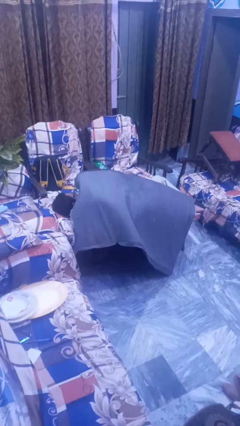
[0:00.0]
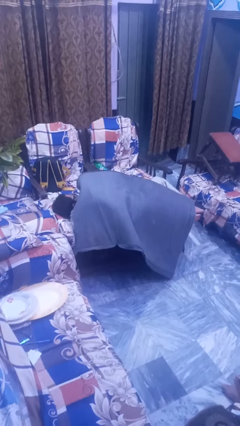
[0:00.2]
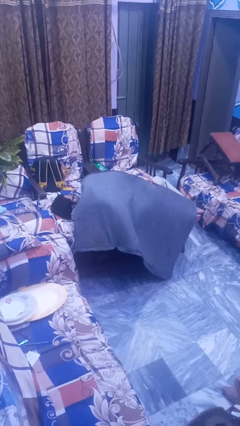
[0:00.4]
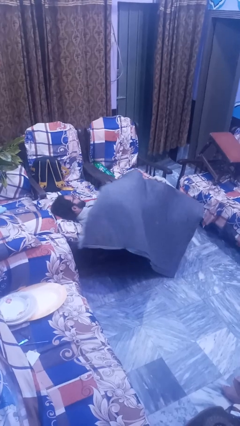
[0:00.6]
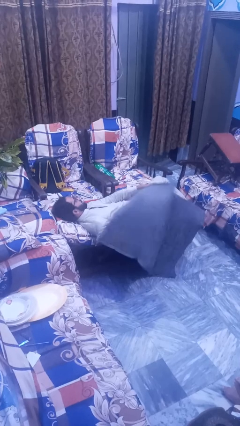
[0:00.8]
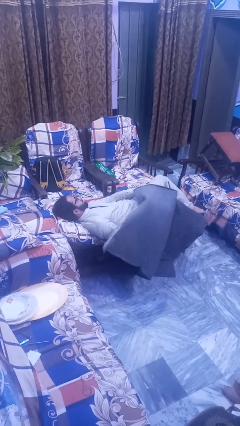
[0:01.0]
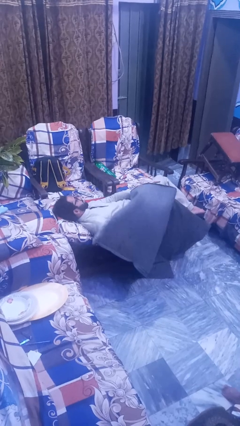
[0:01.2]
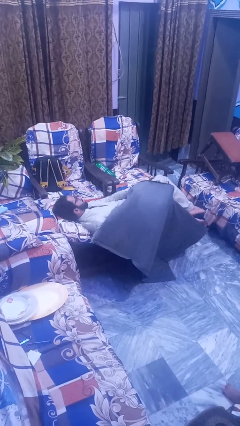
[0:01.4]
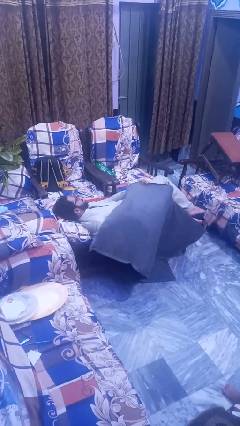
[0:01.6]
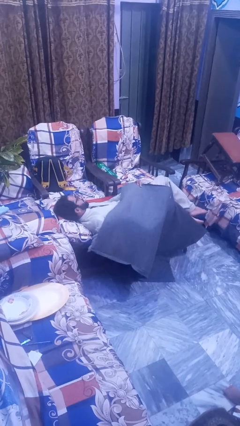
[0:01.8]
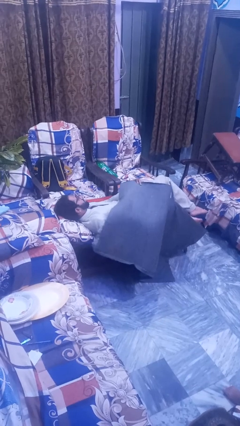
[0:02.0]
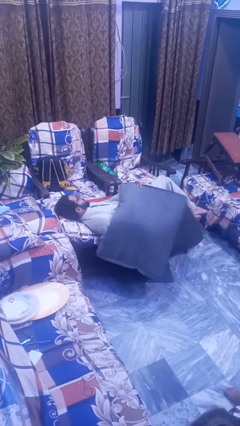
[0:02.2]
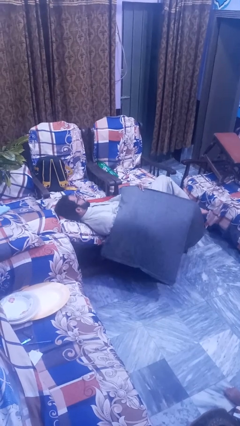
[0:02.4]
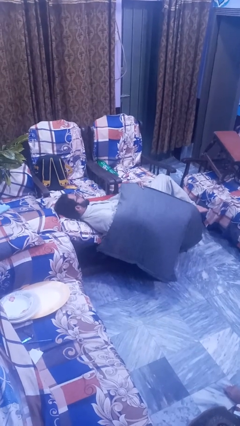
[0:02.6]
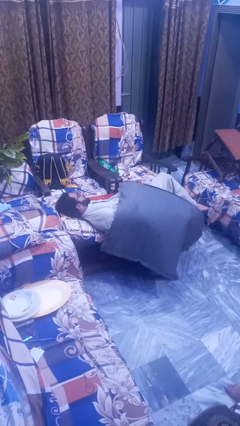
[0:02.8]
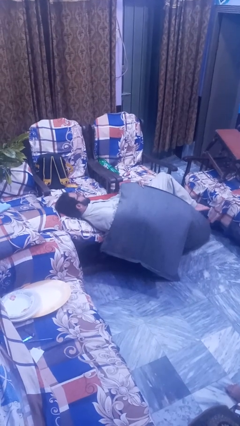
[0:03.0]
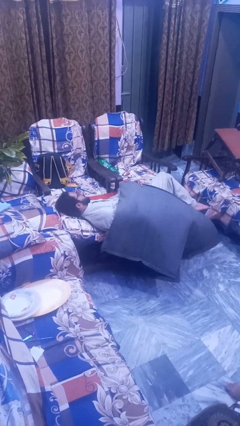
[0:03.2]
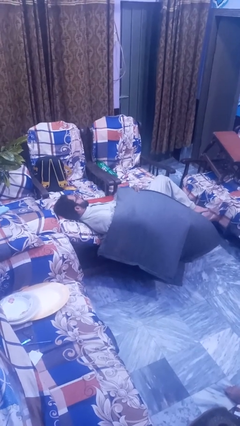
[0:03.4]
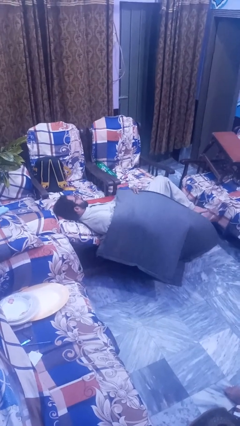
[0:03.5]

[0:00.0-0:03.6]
person uncovers with blanket

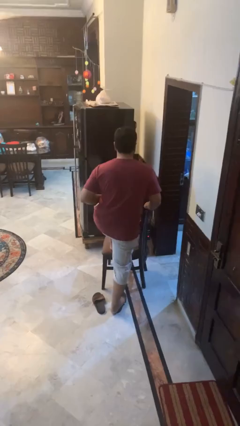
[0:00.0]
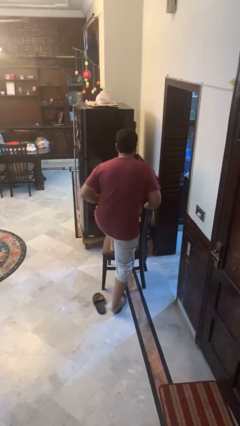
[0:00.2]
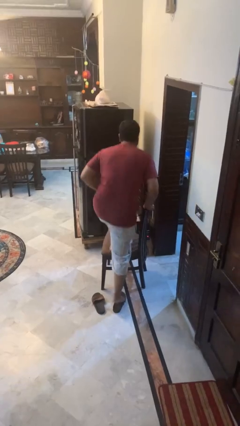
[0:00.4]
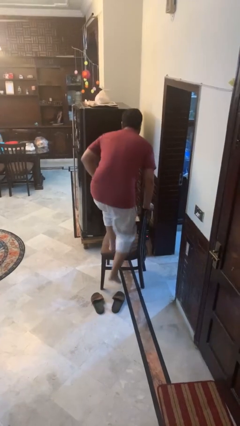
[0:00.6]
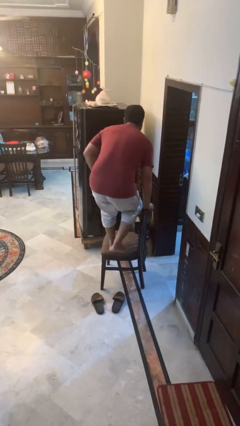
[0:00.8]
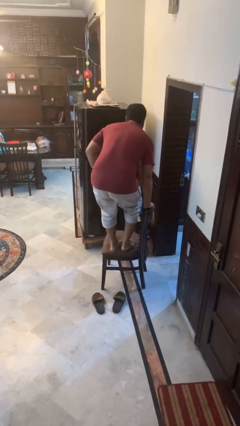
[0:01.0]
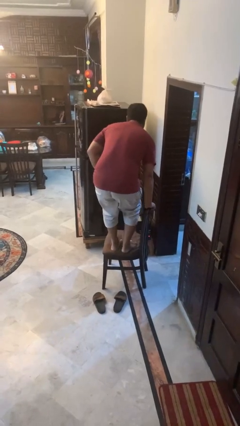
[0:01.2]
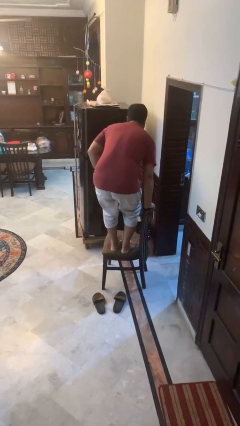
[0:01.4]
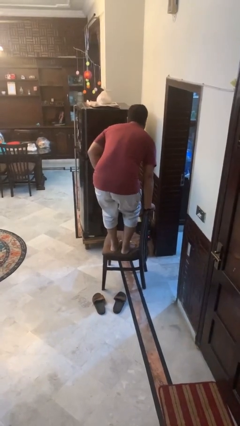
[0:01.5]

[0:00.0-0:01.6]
person climbs on chair

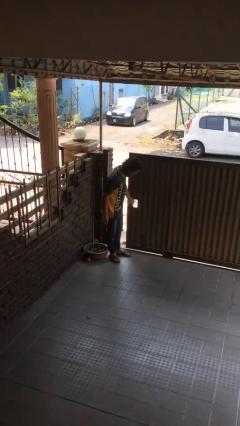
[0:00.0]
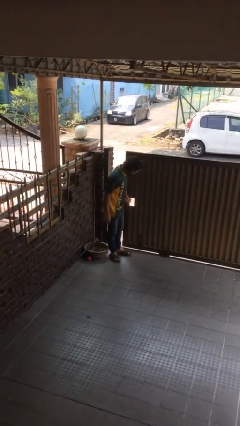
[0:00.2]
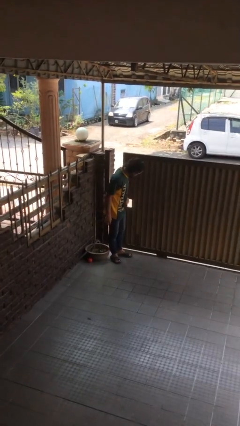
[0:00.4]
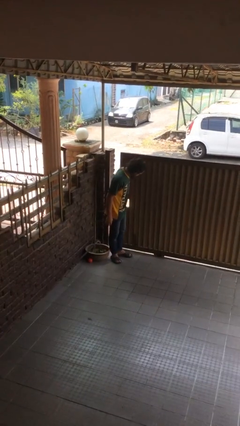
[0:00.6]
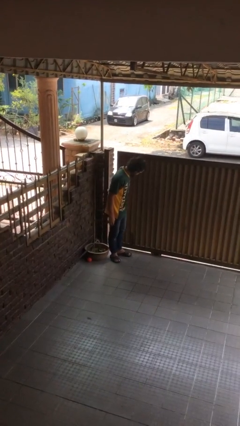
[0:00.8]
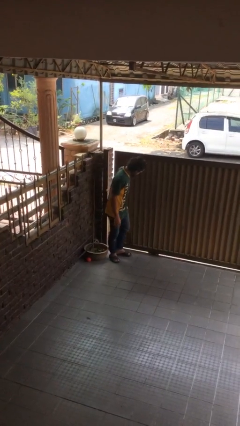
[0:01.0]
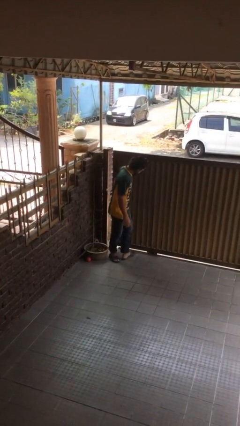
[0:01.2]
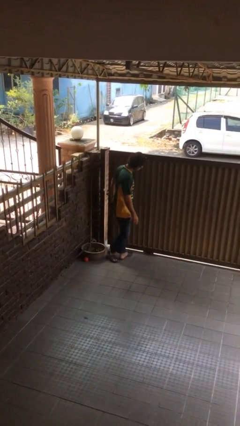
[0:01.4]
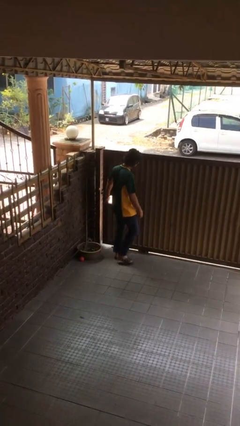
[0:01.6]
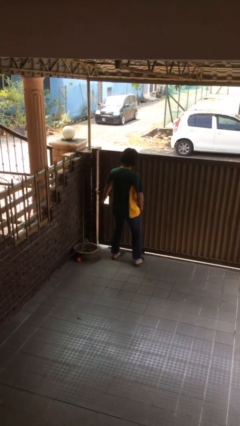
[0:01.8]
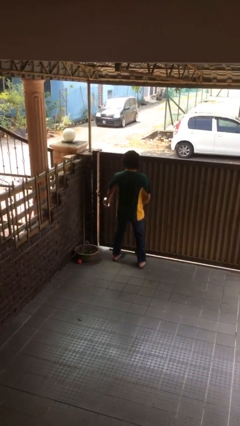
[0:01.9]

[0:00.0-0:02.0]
person closes facility door

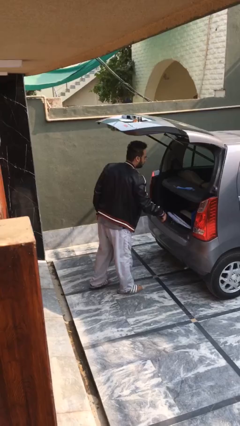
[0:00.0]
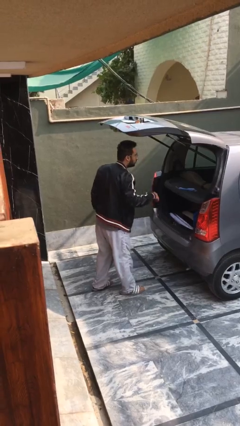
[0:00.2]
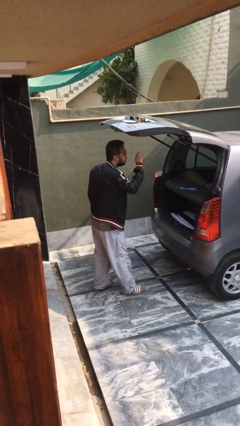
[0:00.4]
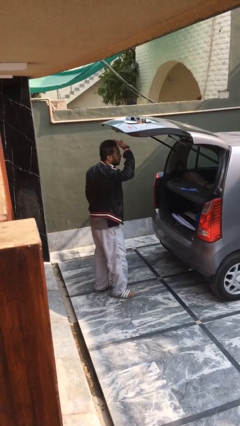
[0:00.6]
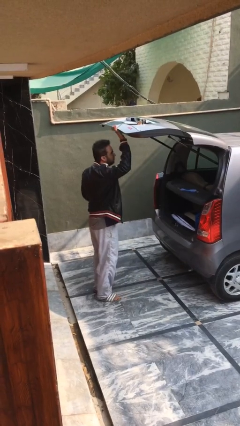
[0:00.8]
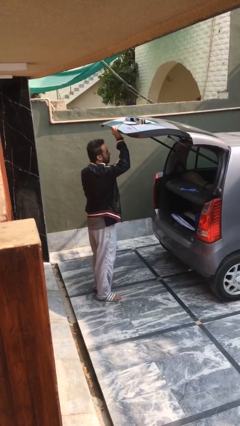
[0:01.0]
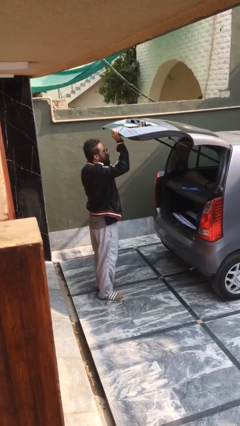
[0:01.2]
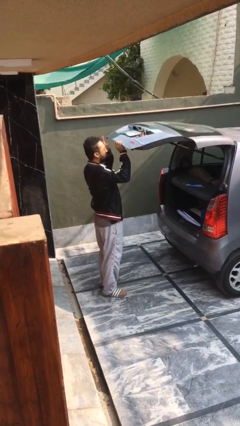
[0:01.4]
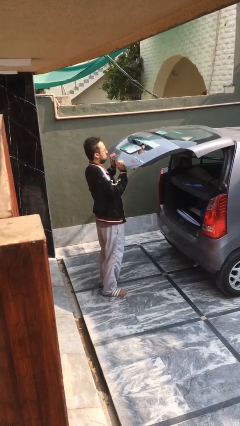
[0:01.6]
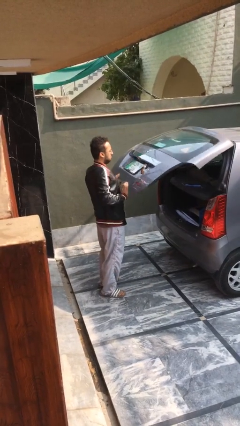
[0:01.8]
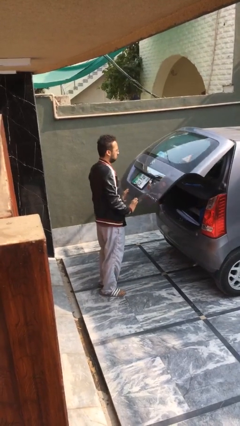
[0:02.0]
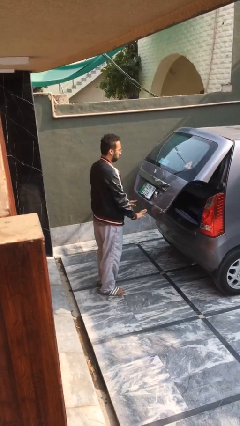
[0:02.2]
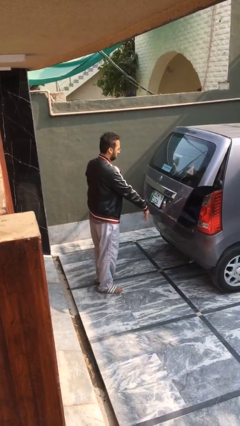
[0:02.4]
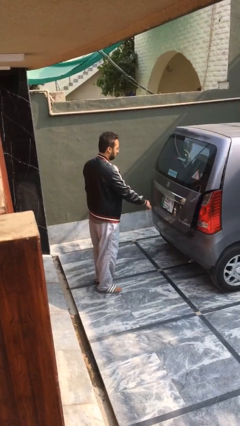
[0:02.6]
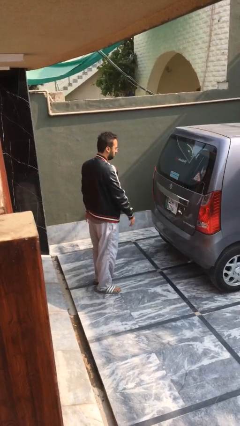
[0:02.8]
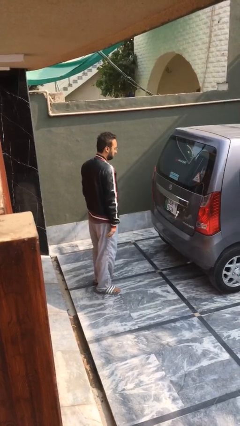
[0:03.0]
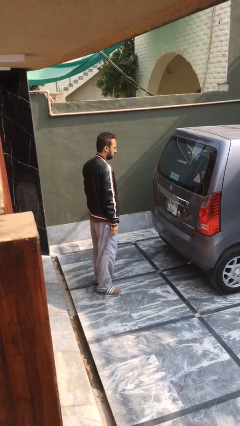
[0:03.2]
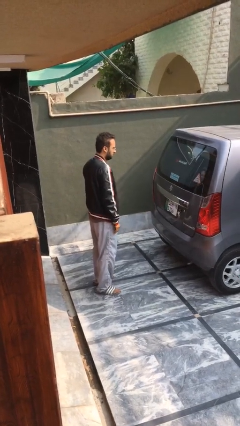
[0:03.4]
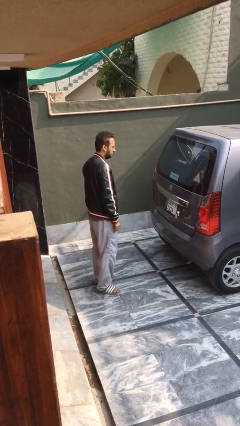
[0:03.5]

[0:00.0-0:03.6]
person closes car trunk

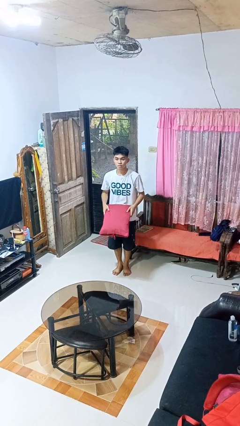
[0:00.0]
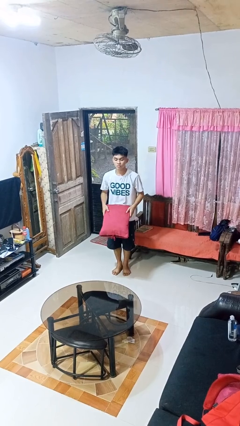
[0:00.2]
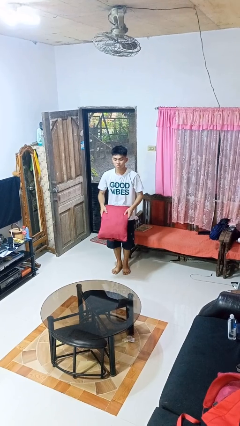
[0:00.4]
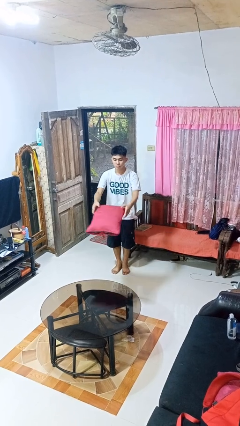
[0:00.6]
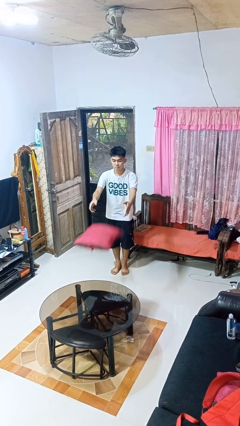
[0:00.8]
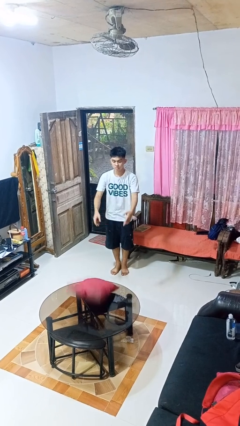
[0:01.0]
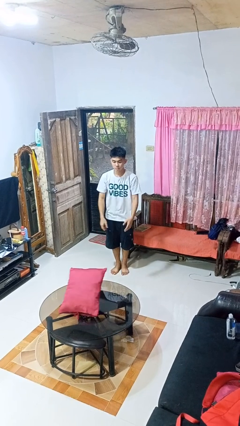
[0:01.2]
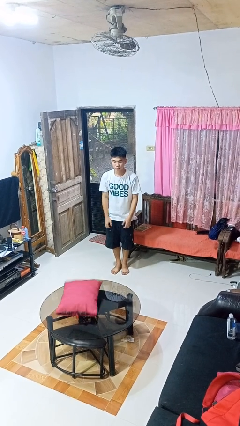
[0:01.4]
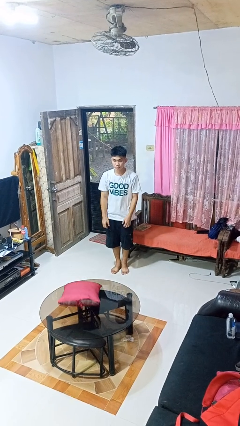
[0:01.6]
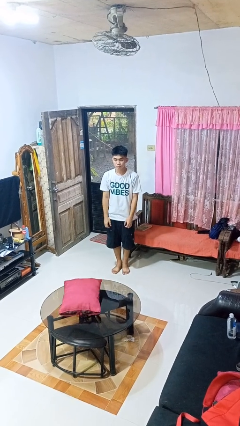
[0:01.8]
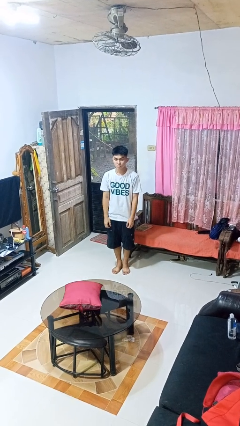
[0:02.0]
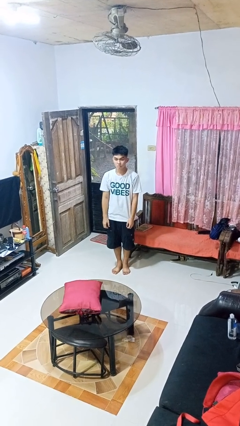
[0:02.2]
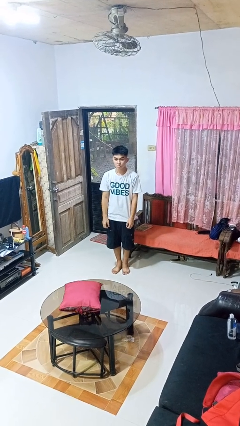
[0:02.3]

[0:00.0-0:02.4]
person throws object on table

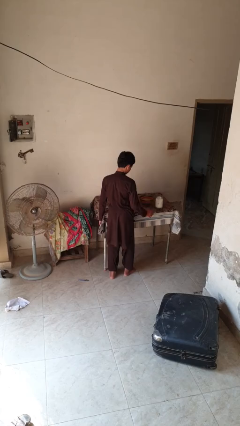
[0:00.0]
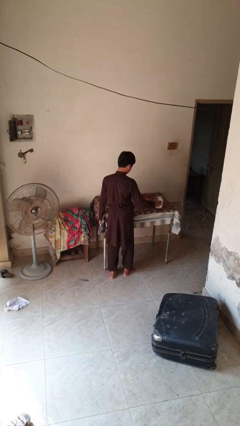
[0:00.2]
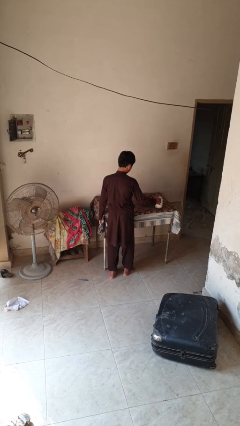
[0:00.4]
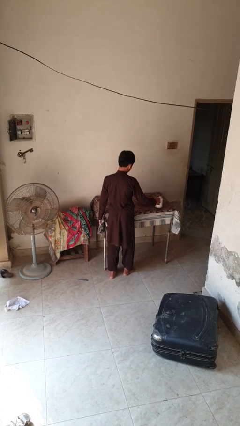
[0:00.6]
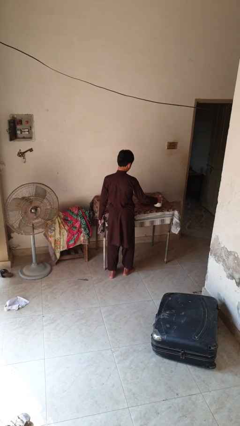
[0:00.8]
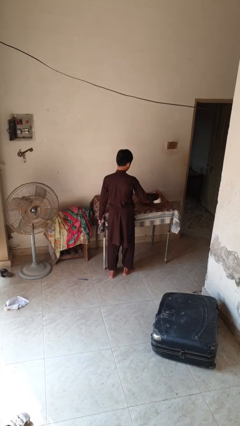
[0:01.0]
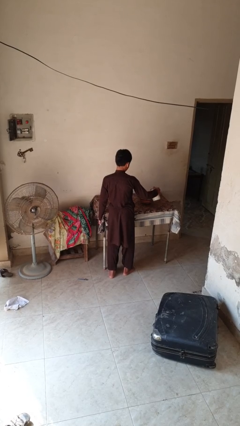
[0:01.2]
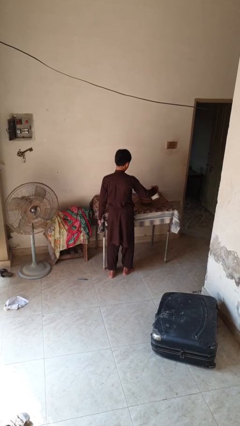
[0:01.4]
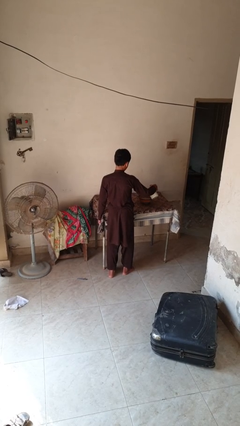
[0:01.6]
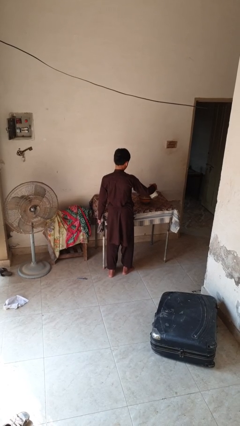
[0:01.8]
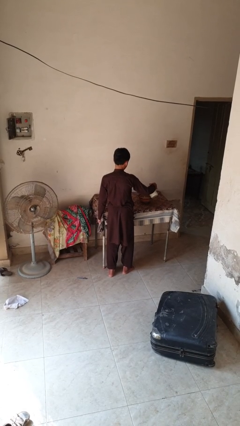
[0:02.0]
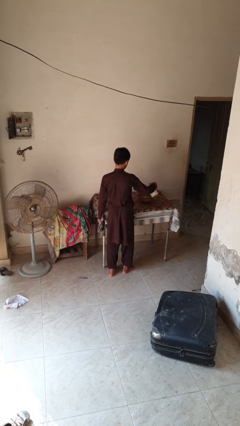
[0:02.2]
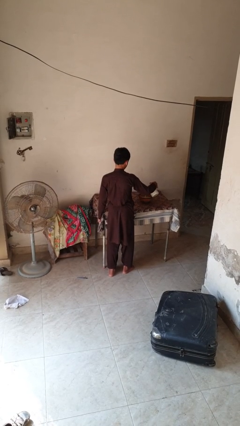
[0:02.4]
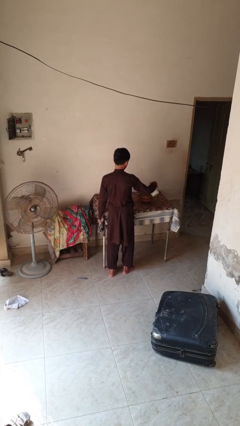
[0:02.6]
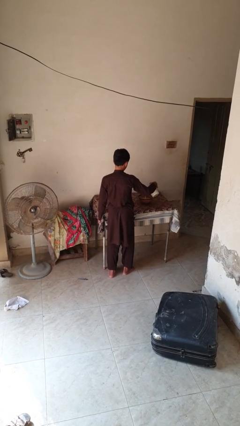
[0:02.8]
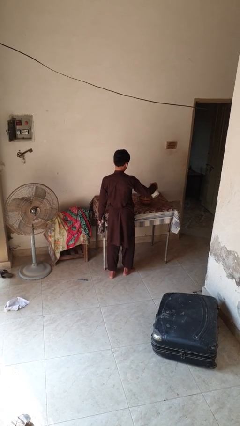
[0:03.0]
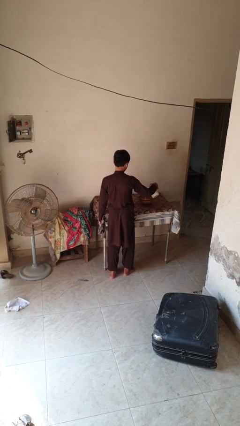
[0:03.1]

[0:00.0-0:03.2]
person pours into bowl

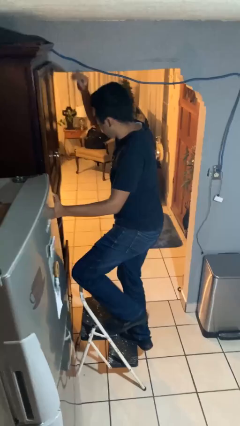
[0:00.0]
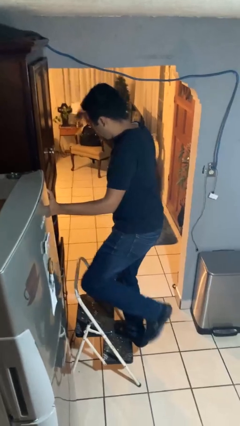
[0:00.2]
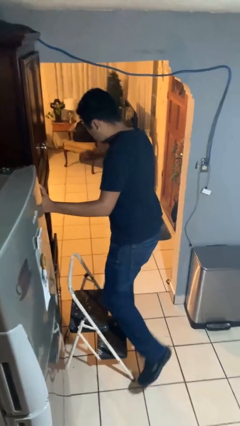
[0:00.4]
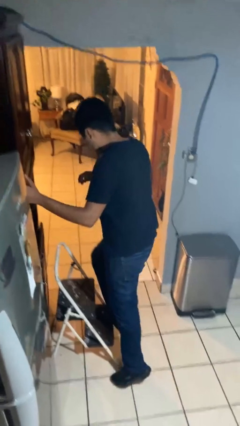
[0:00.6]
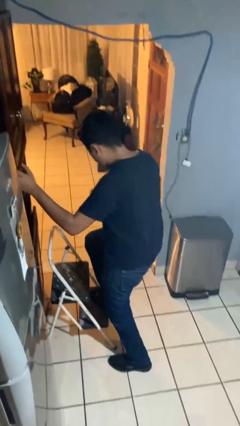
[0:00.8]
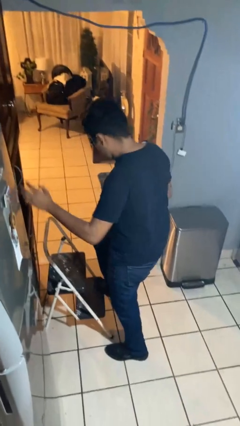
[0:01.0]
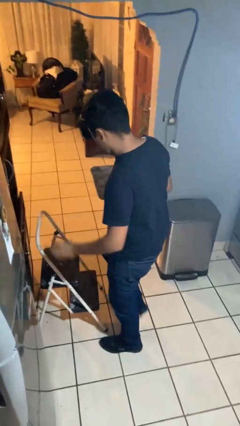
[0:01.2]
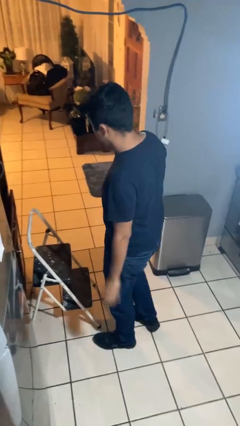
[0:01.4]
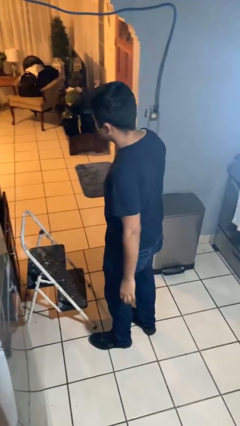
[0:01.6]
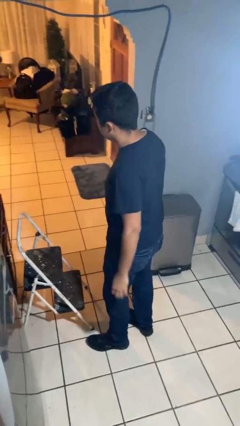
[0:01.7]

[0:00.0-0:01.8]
person climbs down ladder
